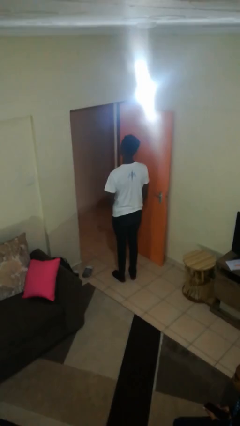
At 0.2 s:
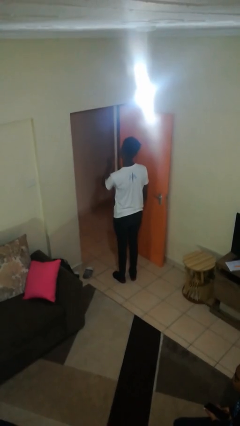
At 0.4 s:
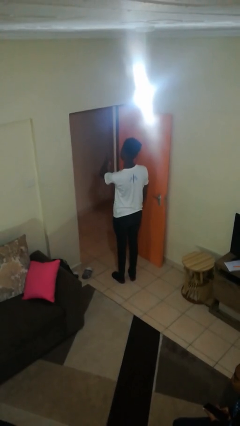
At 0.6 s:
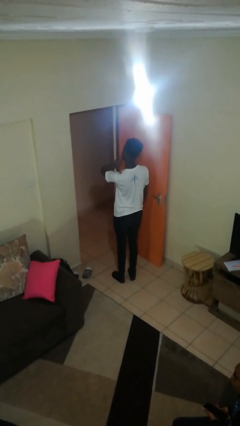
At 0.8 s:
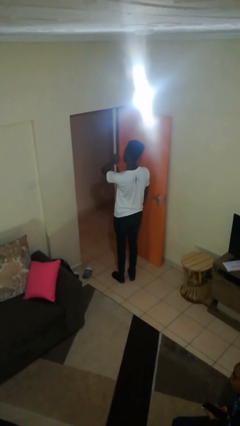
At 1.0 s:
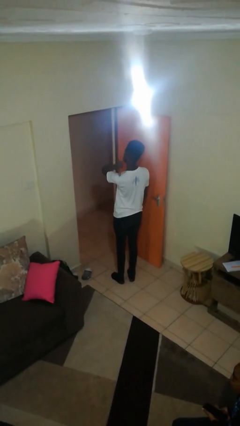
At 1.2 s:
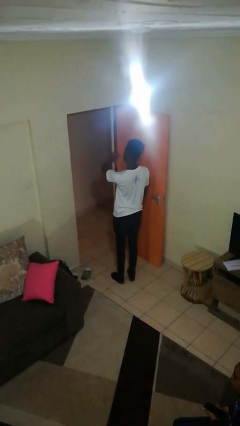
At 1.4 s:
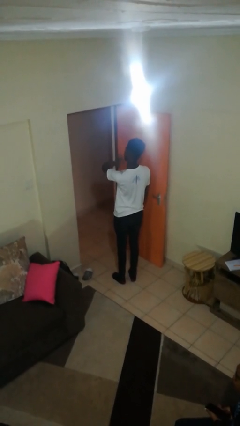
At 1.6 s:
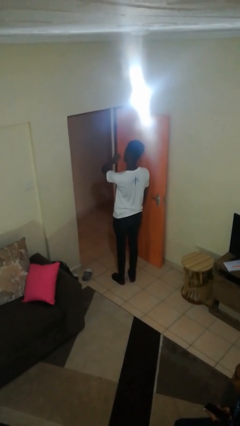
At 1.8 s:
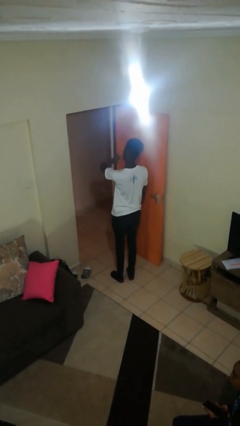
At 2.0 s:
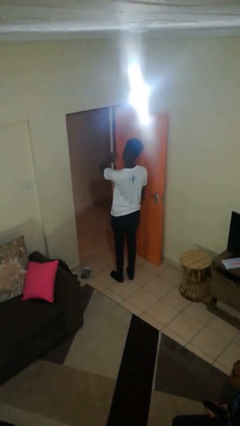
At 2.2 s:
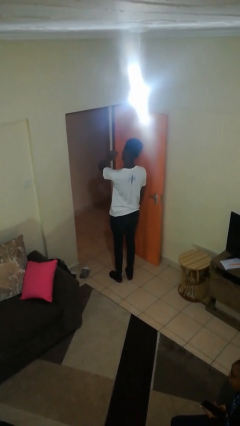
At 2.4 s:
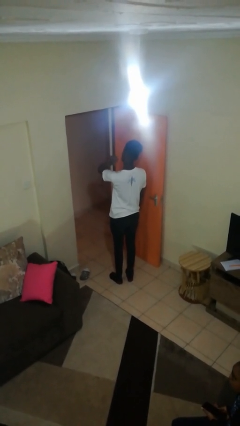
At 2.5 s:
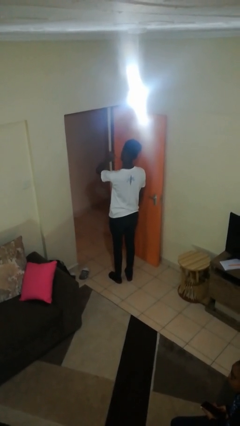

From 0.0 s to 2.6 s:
person gestures behind me

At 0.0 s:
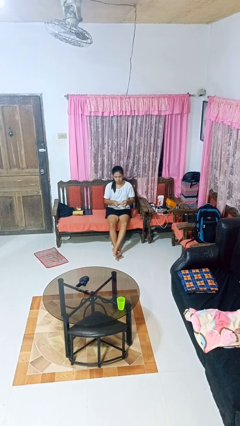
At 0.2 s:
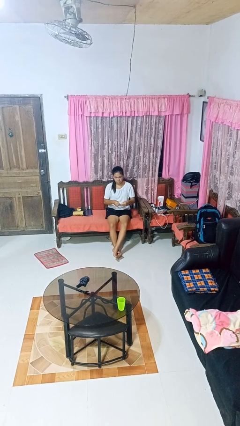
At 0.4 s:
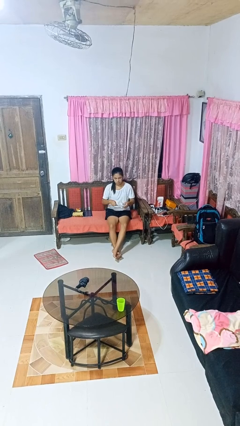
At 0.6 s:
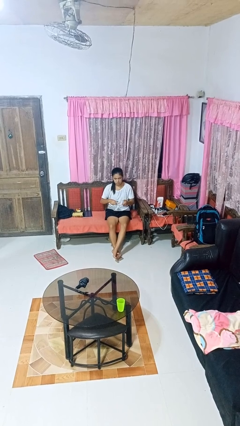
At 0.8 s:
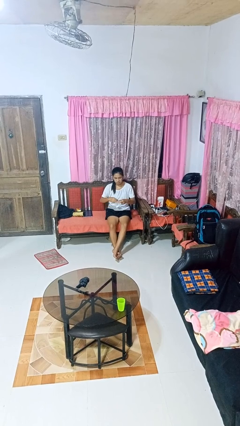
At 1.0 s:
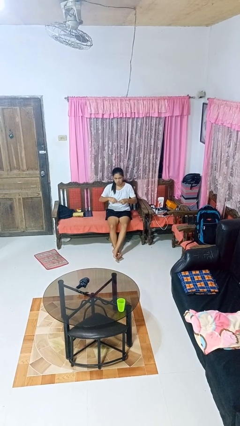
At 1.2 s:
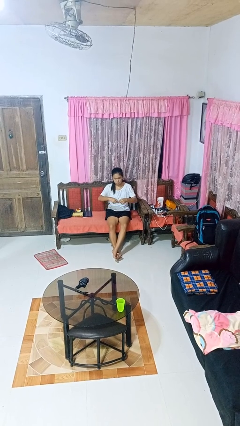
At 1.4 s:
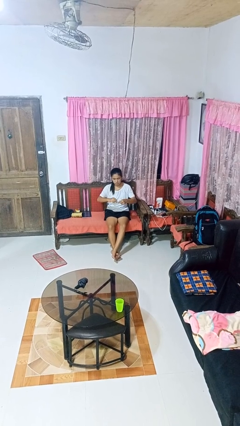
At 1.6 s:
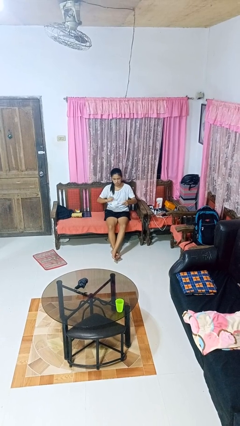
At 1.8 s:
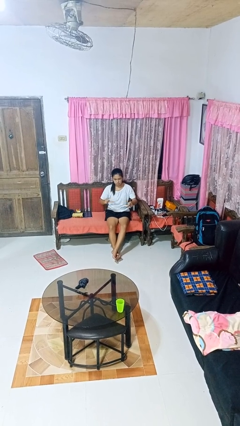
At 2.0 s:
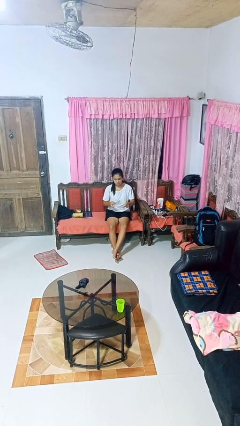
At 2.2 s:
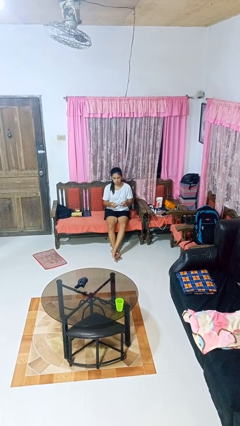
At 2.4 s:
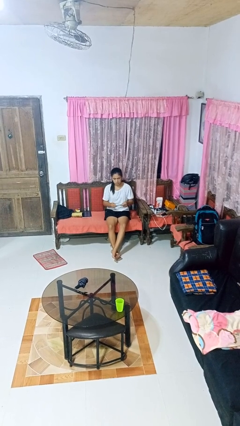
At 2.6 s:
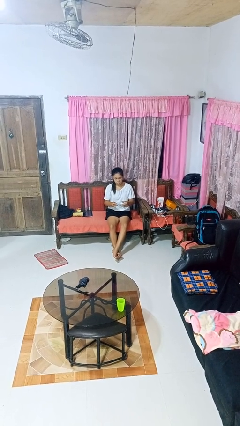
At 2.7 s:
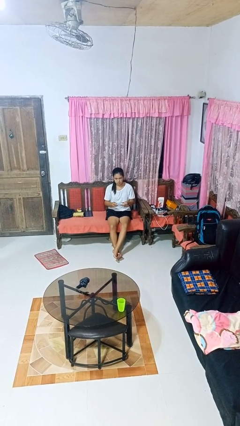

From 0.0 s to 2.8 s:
person tears paper

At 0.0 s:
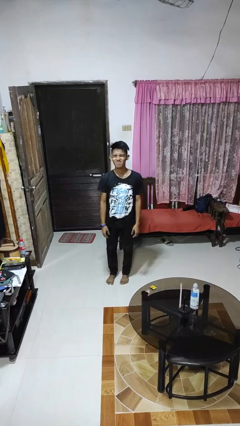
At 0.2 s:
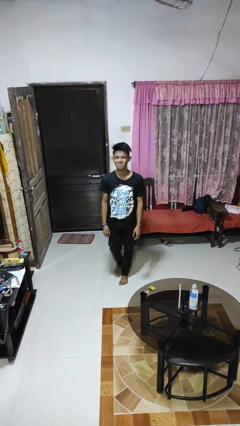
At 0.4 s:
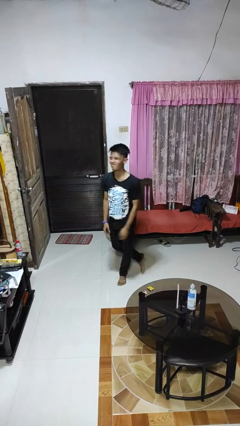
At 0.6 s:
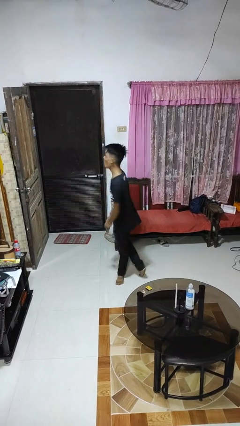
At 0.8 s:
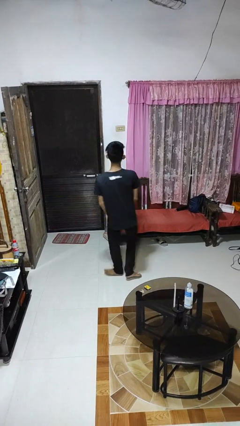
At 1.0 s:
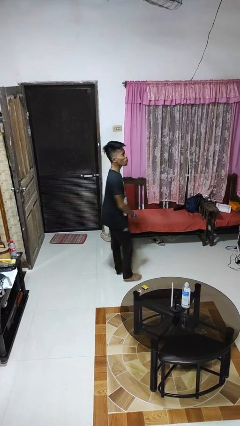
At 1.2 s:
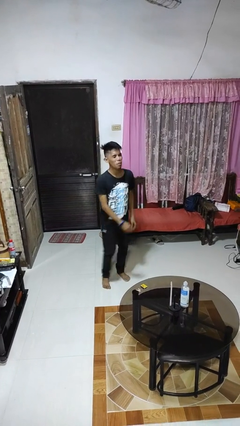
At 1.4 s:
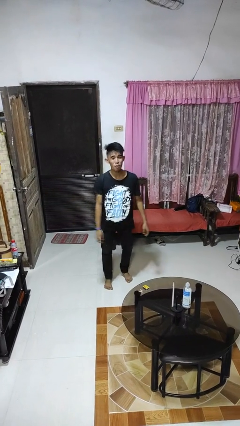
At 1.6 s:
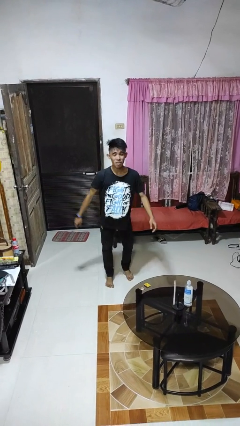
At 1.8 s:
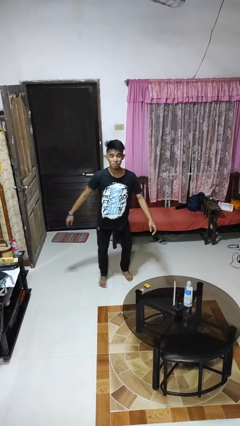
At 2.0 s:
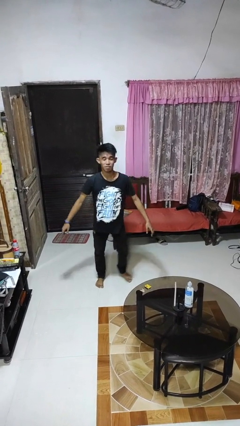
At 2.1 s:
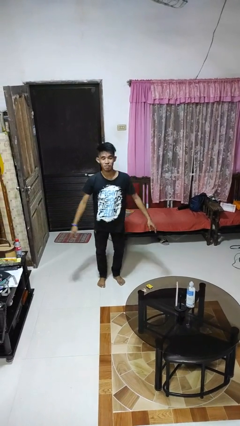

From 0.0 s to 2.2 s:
person twirls

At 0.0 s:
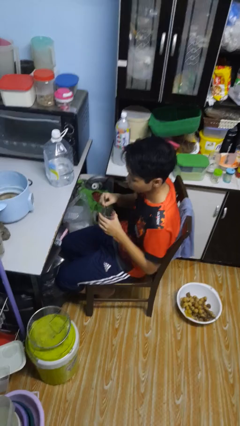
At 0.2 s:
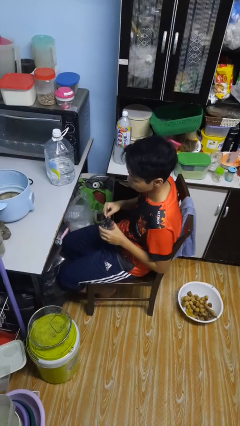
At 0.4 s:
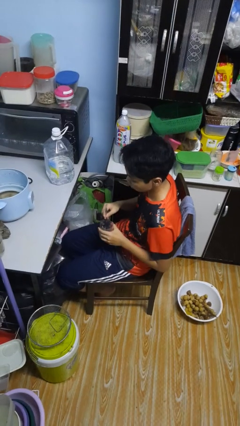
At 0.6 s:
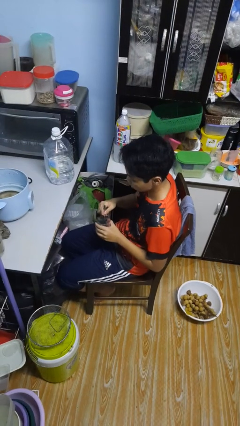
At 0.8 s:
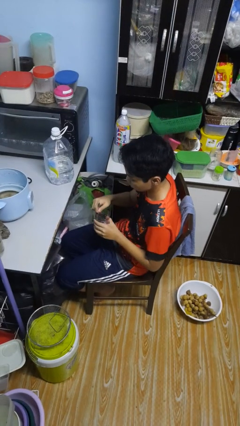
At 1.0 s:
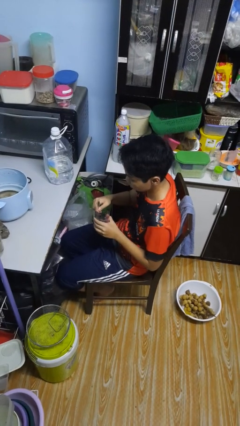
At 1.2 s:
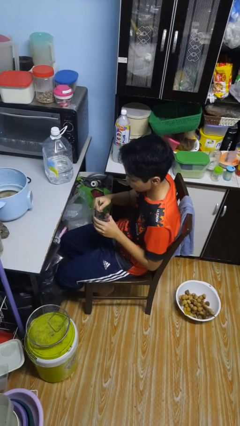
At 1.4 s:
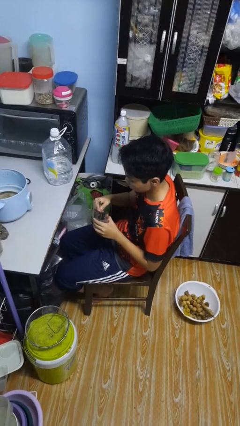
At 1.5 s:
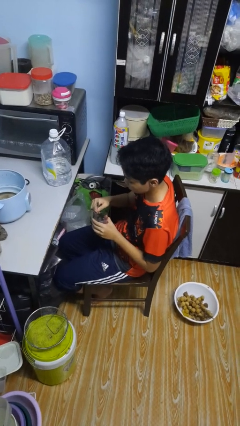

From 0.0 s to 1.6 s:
person stirs mug

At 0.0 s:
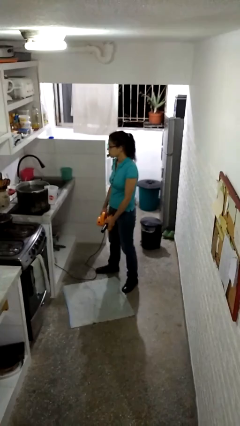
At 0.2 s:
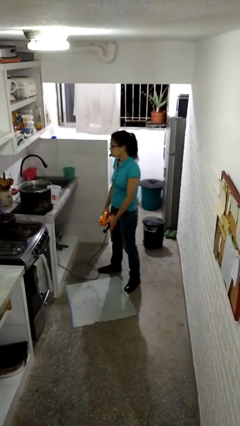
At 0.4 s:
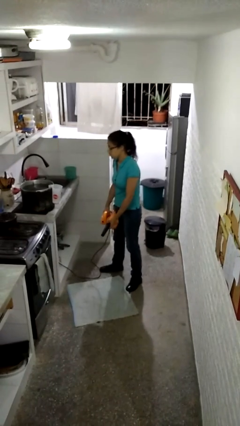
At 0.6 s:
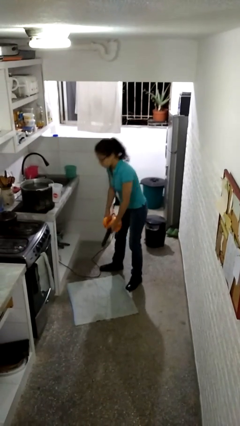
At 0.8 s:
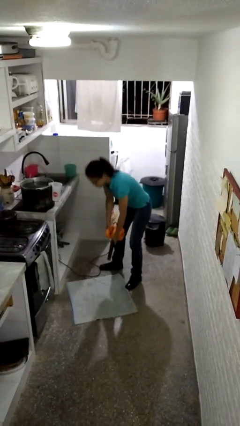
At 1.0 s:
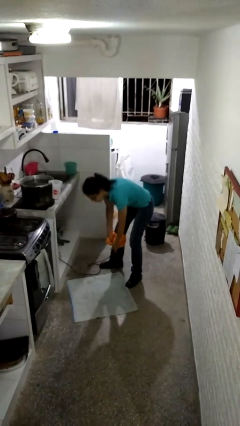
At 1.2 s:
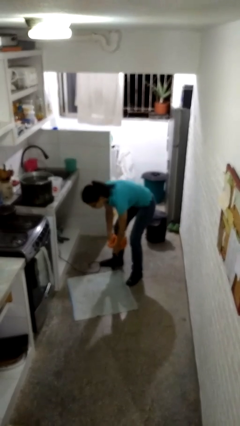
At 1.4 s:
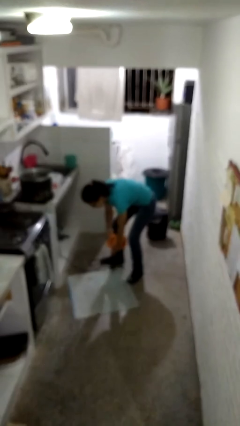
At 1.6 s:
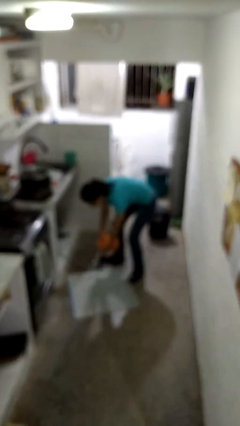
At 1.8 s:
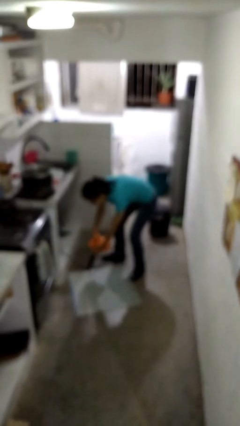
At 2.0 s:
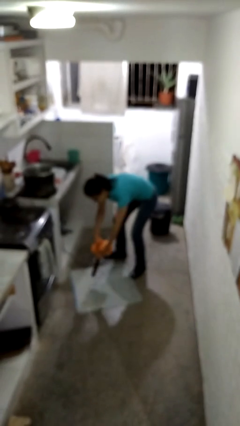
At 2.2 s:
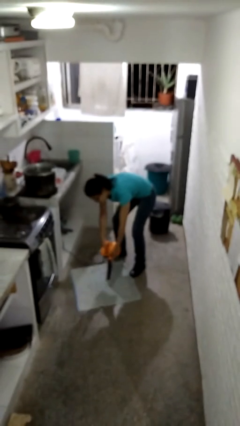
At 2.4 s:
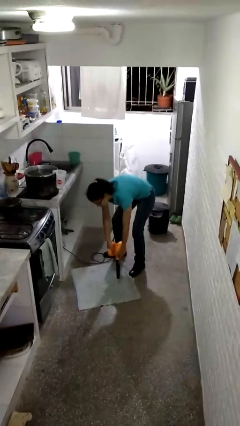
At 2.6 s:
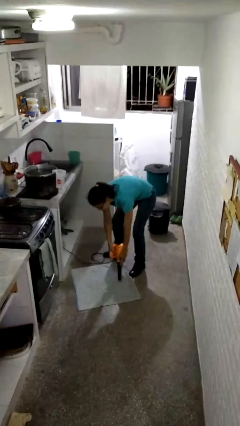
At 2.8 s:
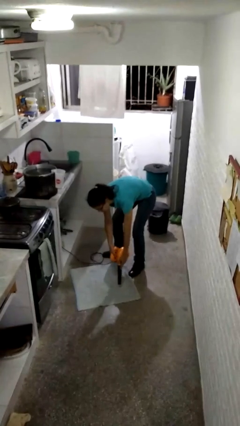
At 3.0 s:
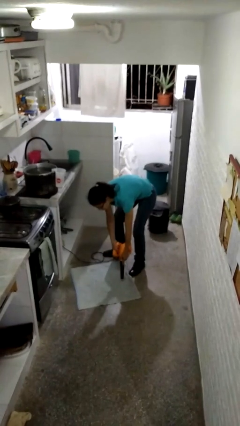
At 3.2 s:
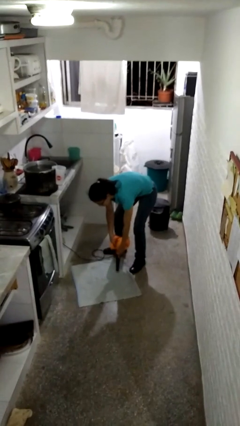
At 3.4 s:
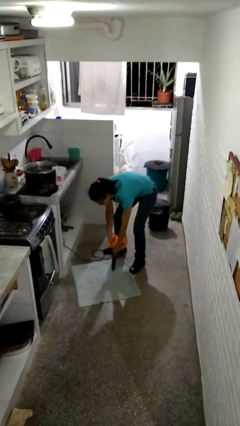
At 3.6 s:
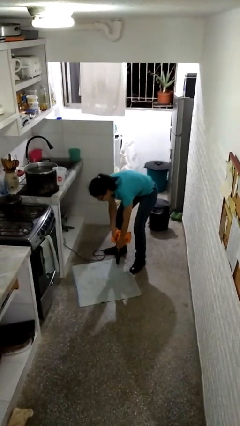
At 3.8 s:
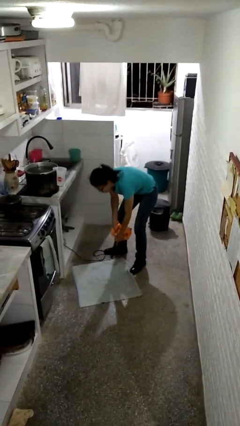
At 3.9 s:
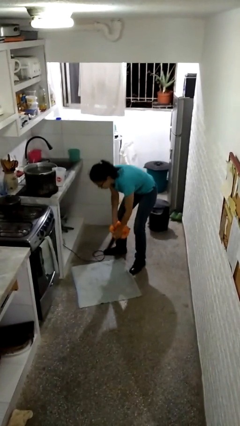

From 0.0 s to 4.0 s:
person vacuums carpet

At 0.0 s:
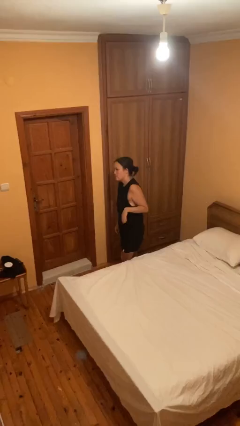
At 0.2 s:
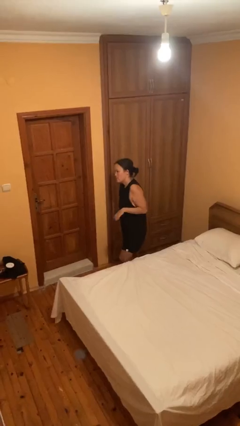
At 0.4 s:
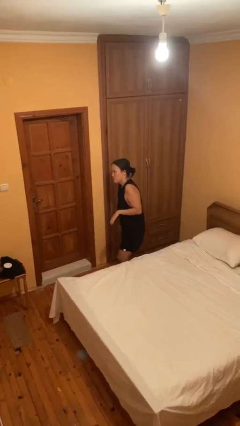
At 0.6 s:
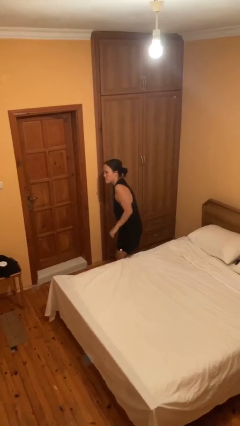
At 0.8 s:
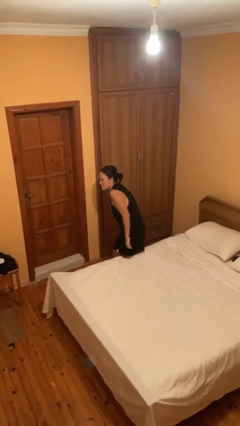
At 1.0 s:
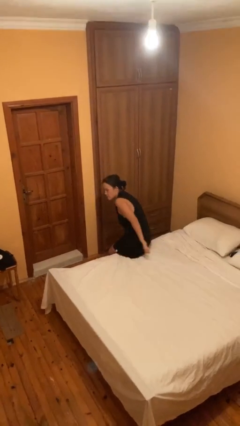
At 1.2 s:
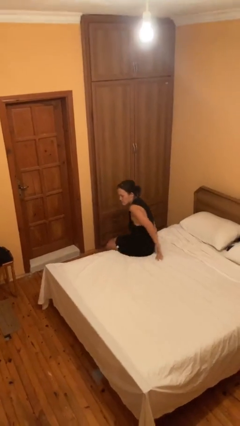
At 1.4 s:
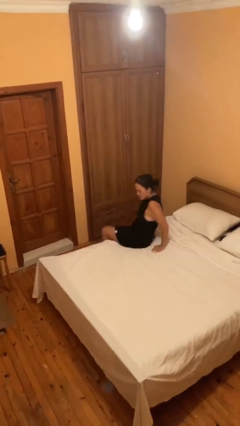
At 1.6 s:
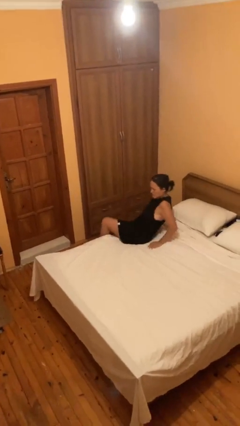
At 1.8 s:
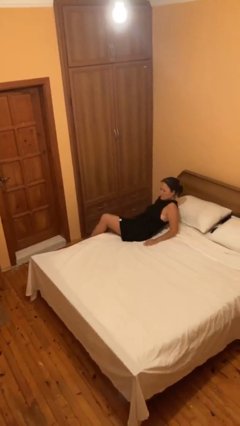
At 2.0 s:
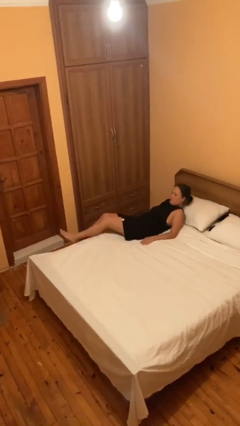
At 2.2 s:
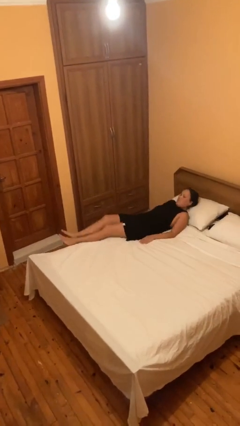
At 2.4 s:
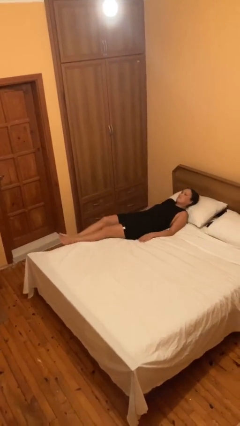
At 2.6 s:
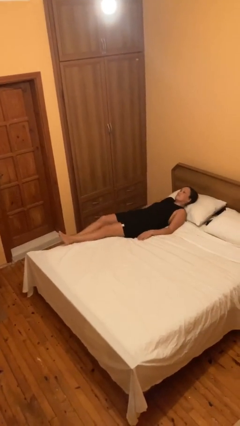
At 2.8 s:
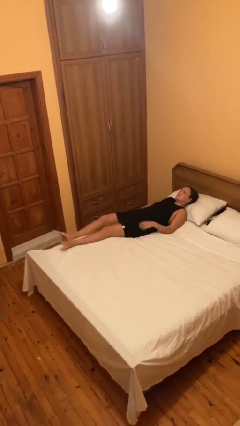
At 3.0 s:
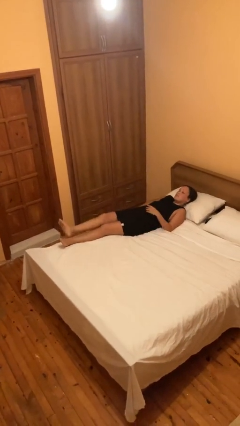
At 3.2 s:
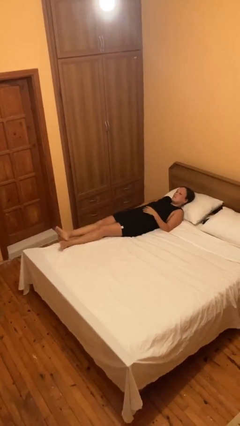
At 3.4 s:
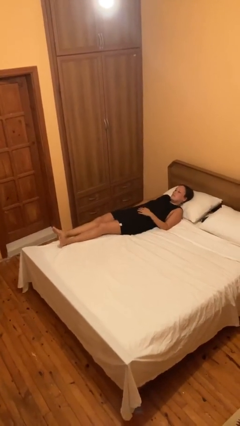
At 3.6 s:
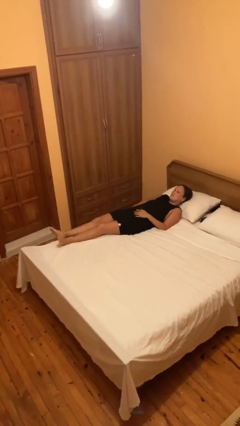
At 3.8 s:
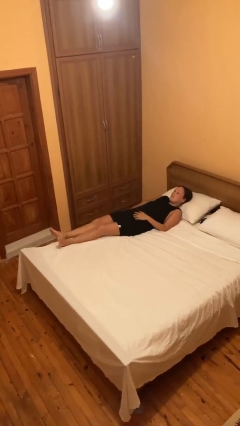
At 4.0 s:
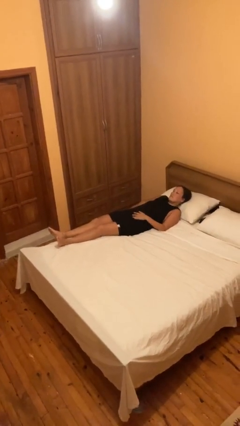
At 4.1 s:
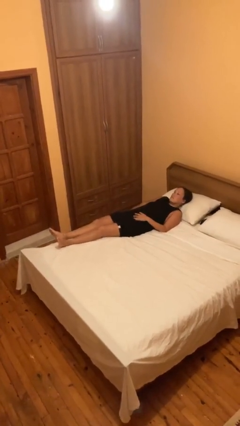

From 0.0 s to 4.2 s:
person lies down on bed

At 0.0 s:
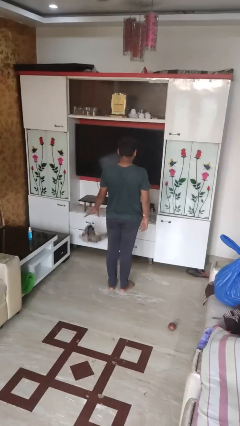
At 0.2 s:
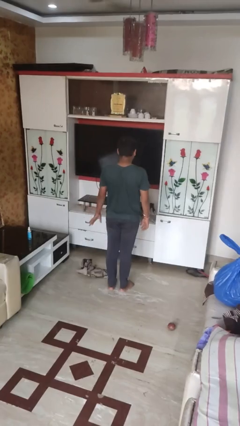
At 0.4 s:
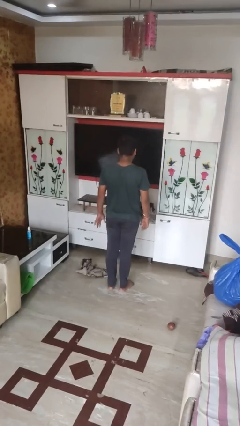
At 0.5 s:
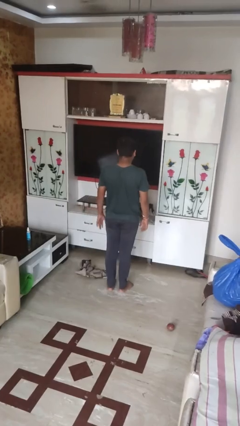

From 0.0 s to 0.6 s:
person throws object to ground
